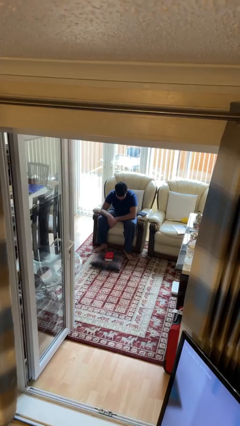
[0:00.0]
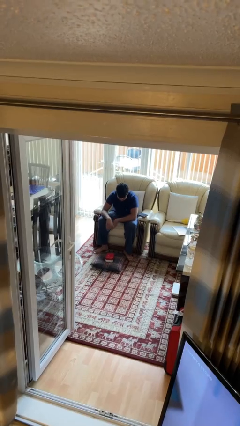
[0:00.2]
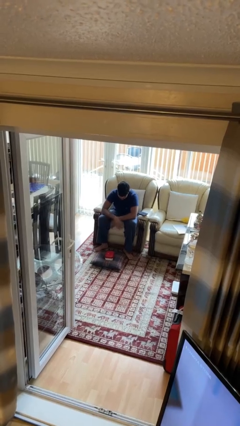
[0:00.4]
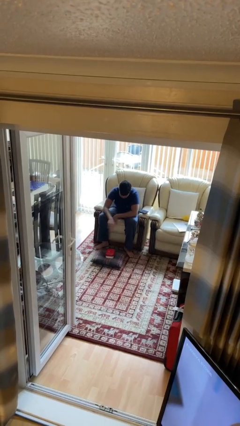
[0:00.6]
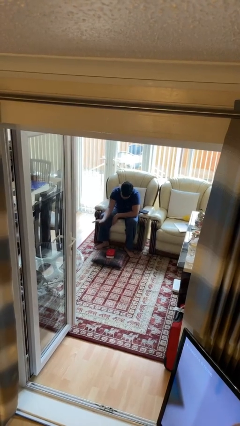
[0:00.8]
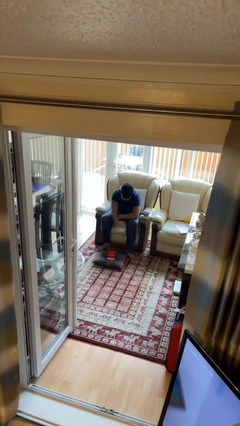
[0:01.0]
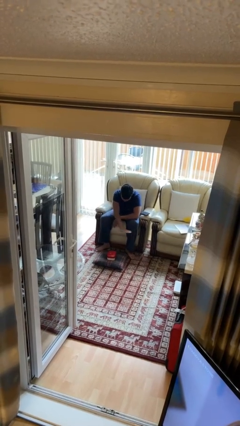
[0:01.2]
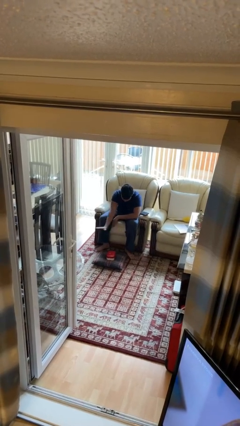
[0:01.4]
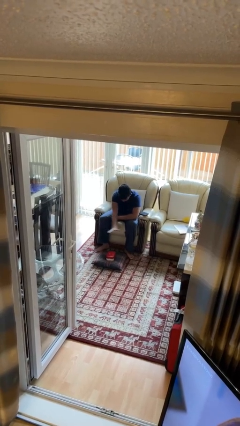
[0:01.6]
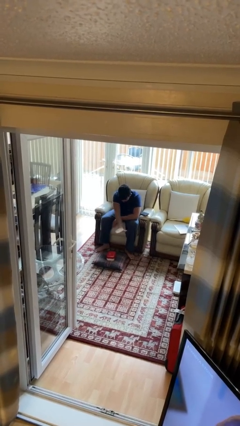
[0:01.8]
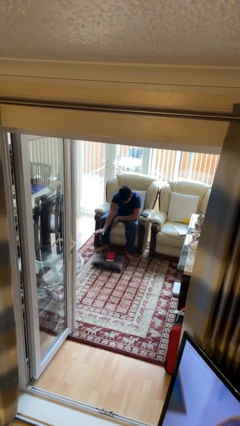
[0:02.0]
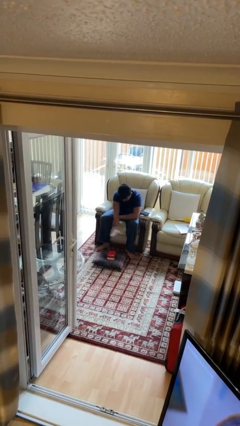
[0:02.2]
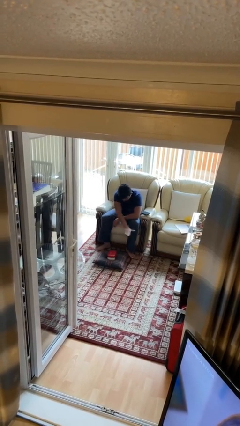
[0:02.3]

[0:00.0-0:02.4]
person waves hand over object

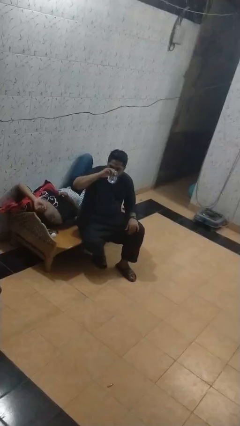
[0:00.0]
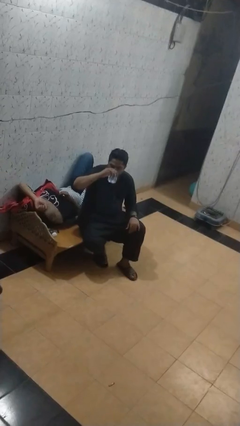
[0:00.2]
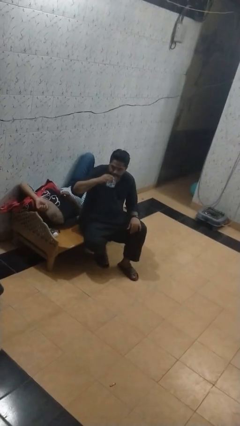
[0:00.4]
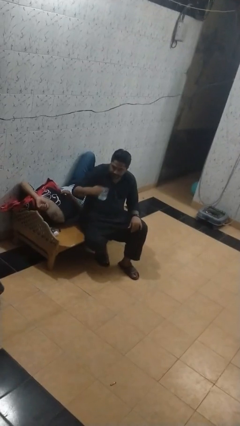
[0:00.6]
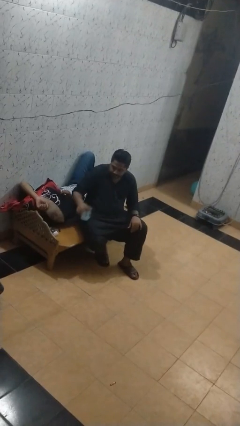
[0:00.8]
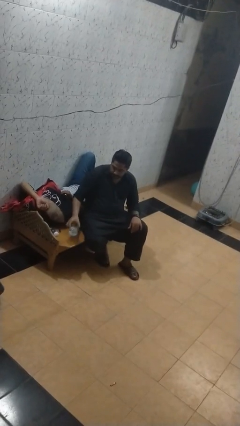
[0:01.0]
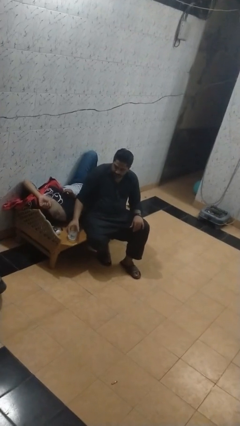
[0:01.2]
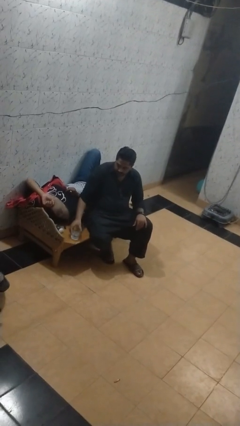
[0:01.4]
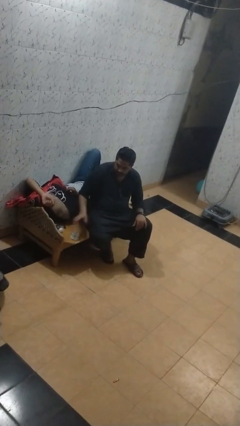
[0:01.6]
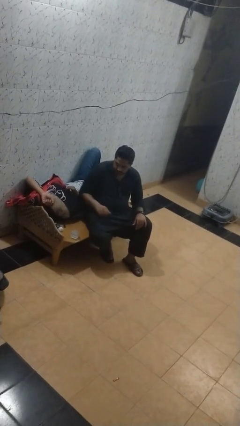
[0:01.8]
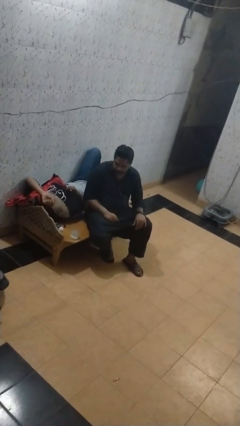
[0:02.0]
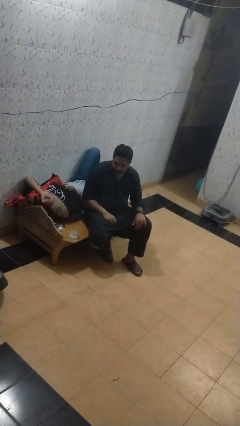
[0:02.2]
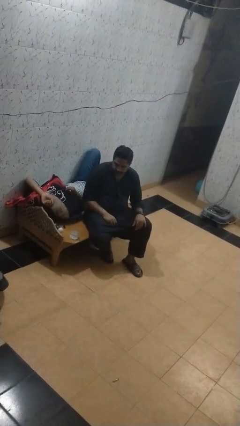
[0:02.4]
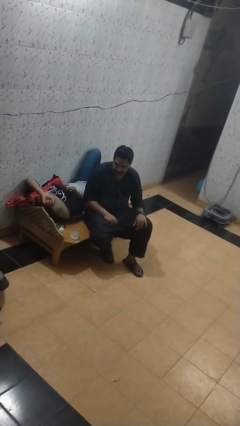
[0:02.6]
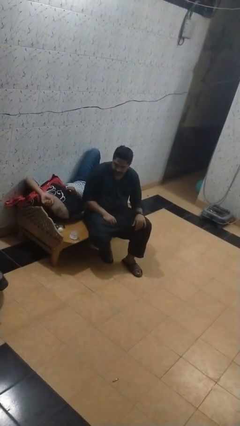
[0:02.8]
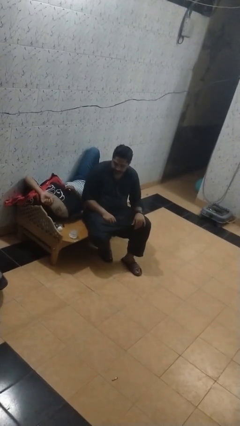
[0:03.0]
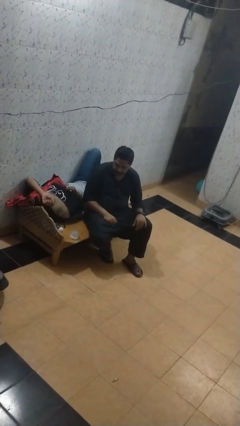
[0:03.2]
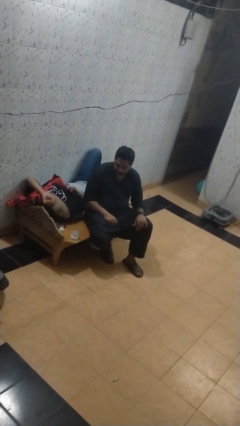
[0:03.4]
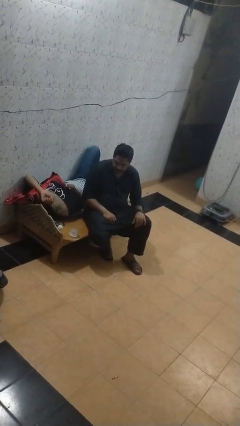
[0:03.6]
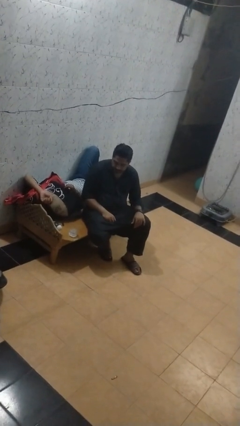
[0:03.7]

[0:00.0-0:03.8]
person puts down object on table

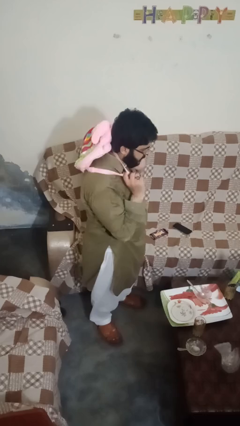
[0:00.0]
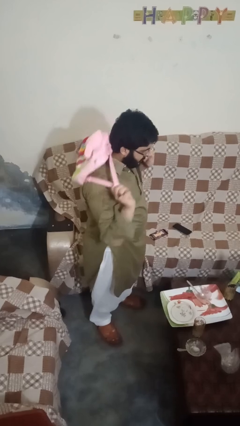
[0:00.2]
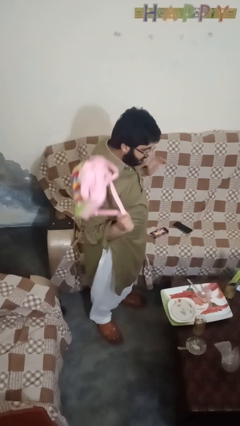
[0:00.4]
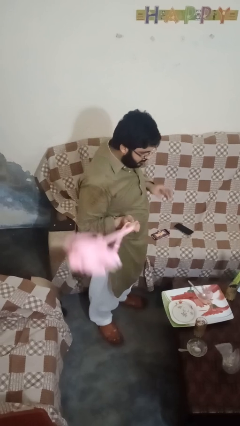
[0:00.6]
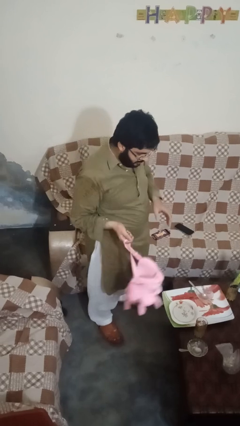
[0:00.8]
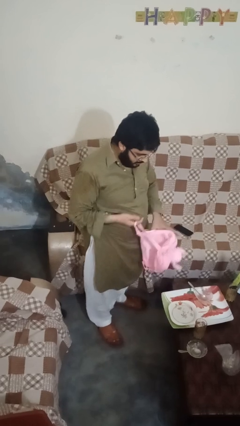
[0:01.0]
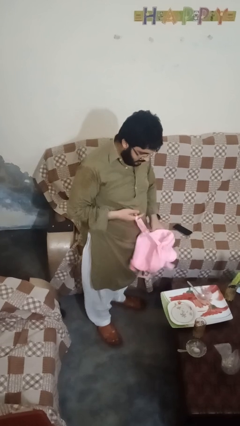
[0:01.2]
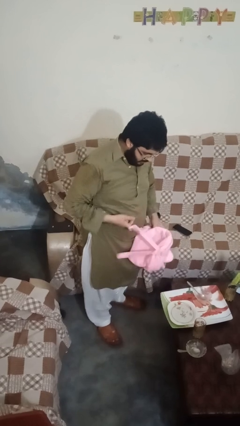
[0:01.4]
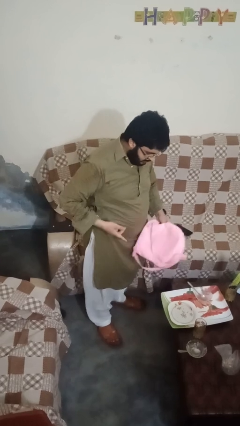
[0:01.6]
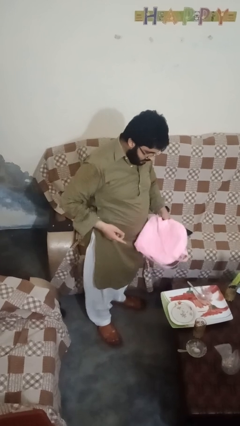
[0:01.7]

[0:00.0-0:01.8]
person takes off backpack

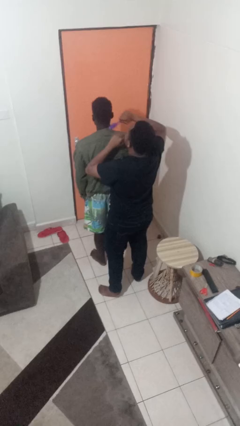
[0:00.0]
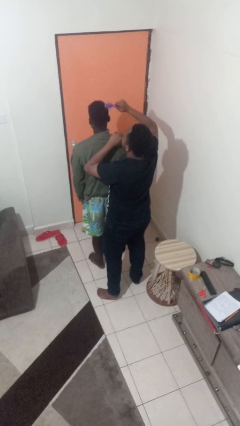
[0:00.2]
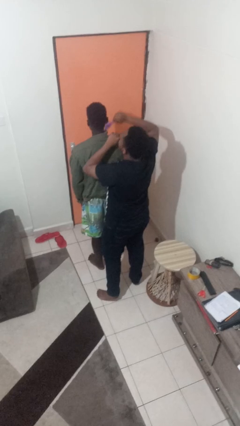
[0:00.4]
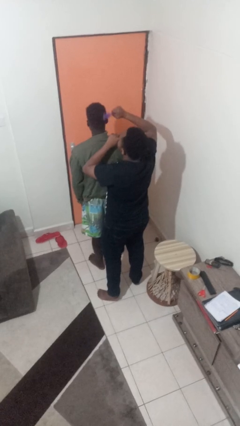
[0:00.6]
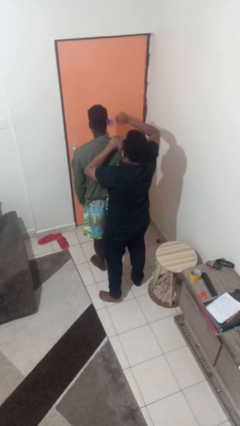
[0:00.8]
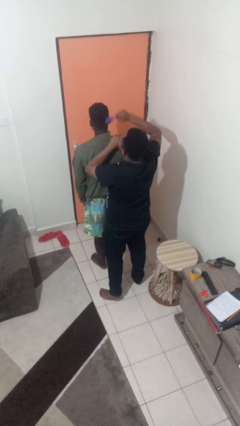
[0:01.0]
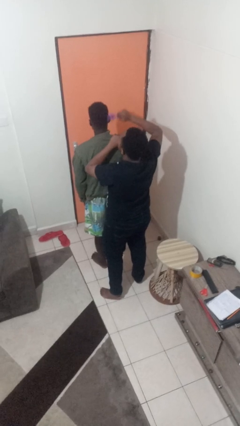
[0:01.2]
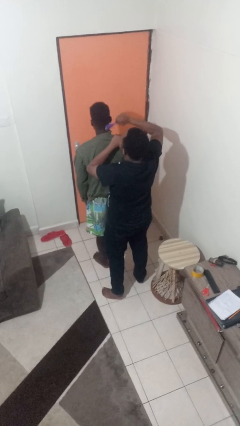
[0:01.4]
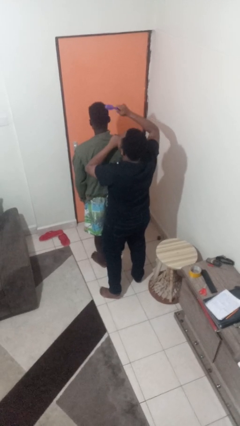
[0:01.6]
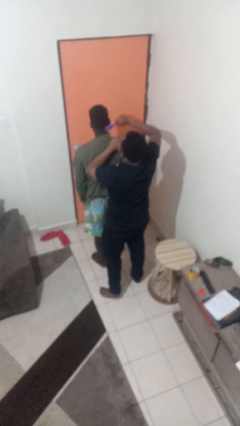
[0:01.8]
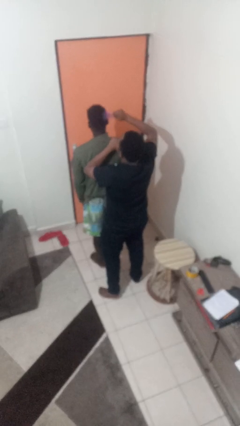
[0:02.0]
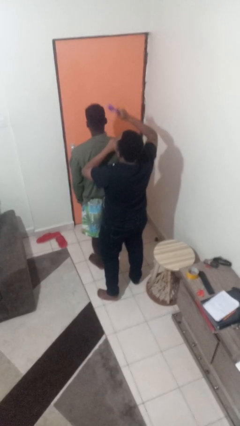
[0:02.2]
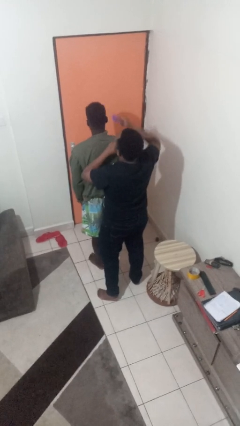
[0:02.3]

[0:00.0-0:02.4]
person brushes hair of person

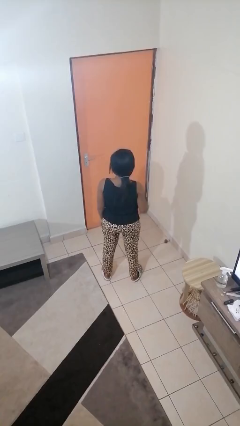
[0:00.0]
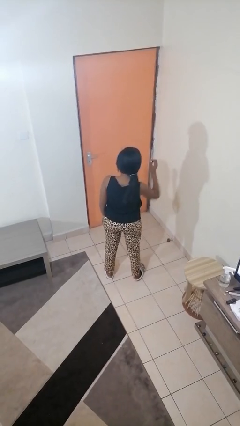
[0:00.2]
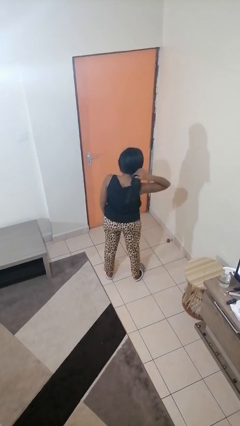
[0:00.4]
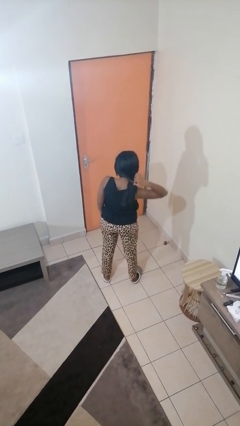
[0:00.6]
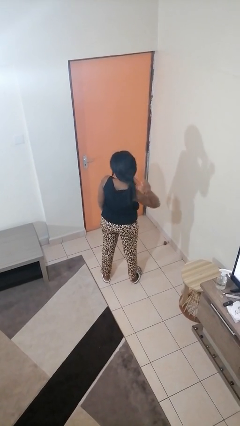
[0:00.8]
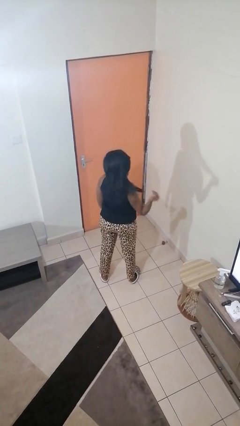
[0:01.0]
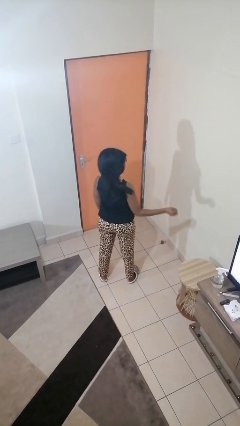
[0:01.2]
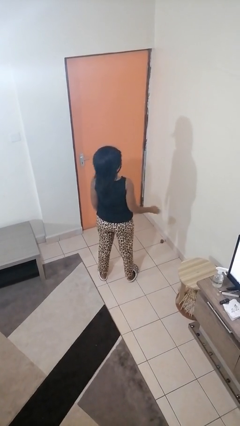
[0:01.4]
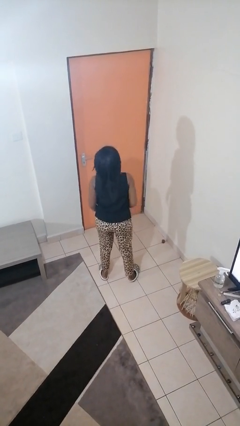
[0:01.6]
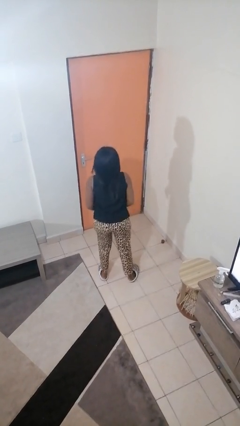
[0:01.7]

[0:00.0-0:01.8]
person takes off hairtie

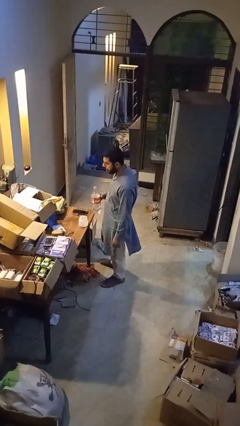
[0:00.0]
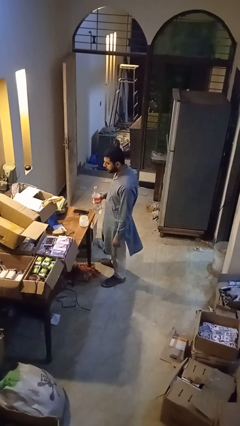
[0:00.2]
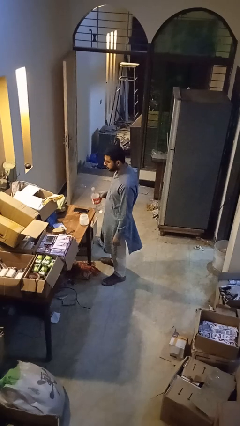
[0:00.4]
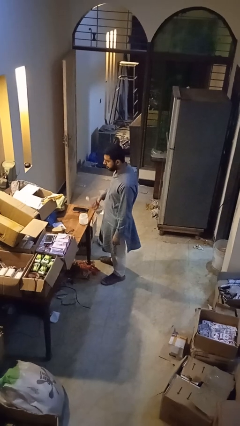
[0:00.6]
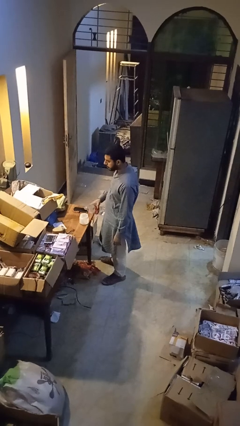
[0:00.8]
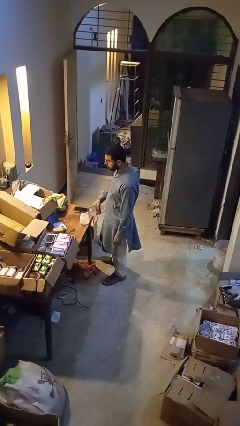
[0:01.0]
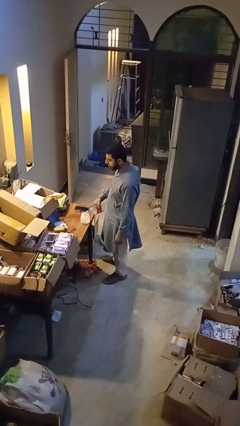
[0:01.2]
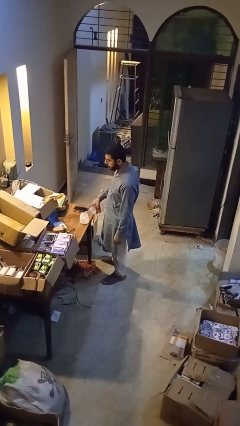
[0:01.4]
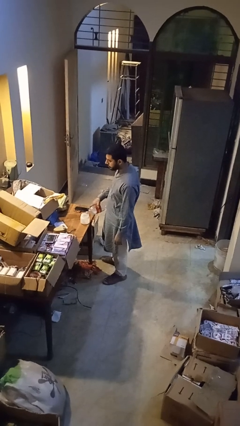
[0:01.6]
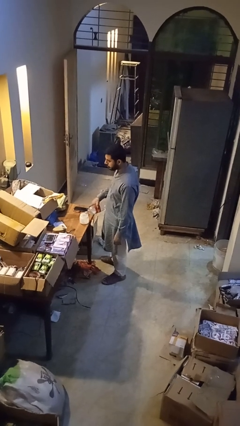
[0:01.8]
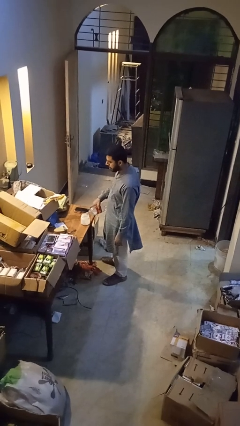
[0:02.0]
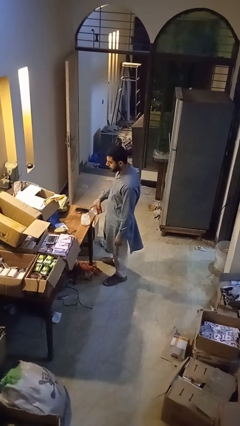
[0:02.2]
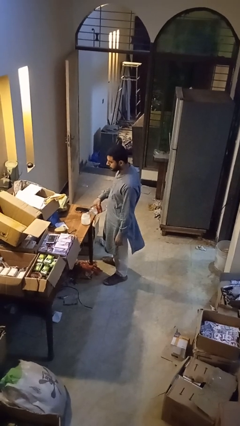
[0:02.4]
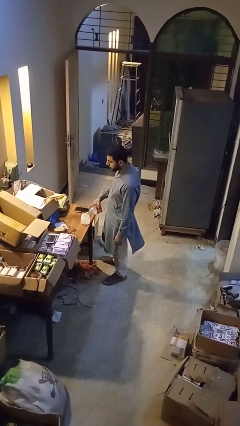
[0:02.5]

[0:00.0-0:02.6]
person pours liquid into cup

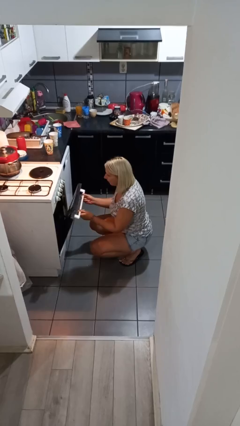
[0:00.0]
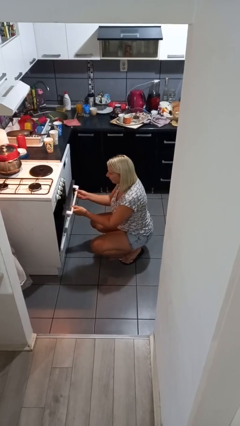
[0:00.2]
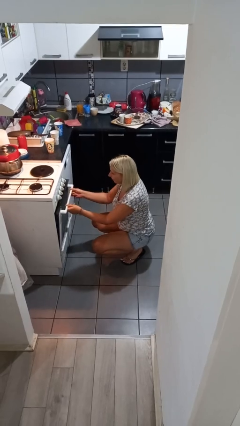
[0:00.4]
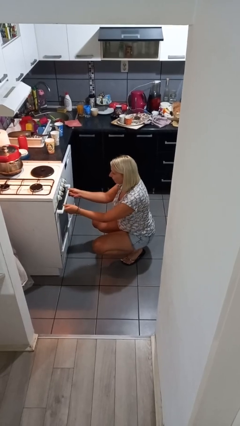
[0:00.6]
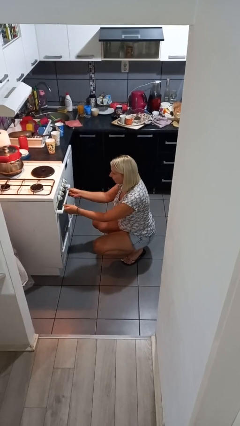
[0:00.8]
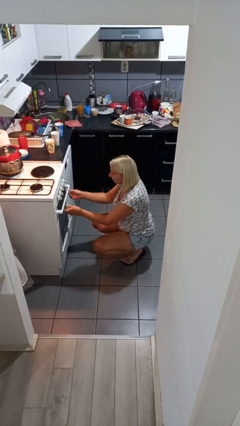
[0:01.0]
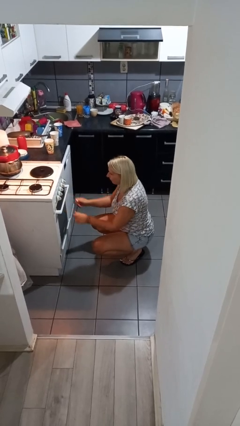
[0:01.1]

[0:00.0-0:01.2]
person closes oven door

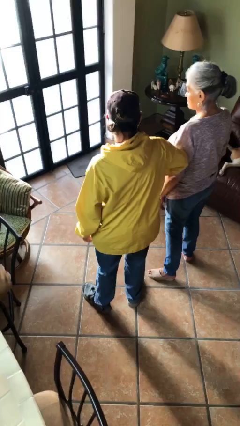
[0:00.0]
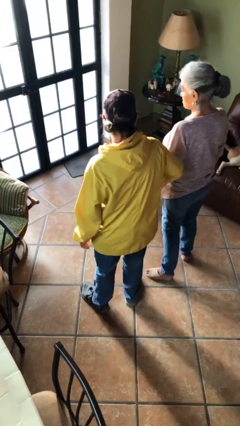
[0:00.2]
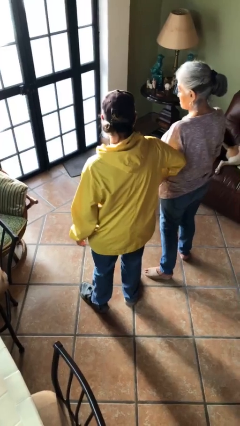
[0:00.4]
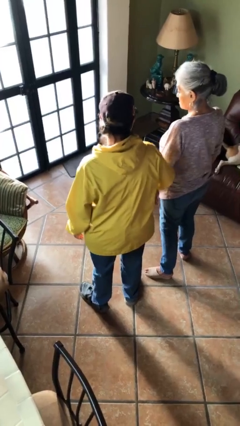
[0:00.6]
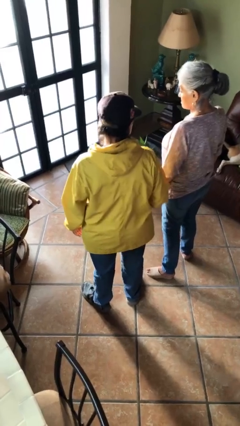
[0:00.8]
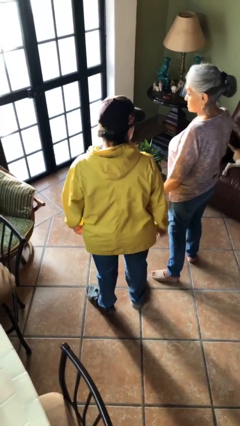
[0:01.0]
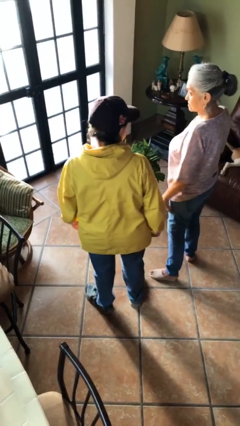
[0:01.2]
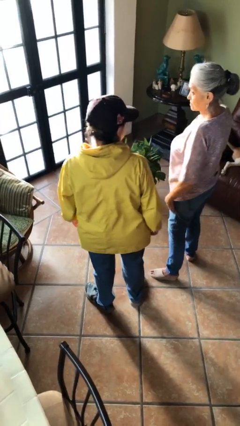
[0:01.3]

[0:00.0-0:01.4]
person nudges person with elbow
